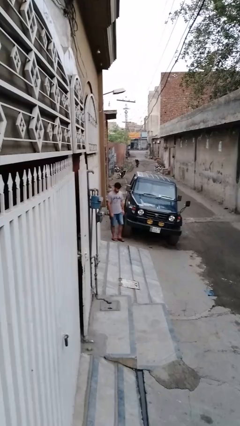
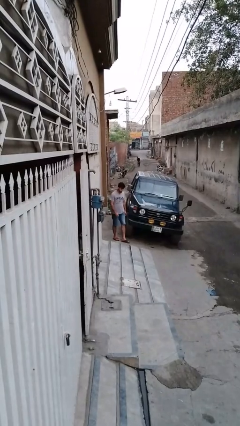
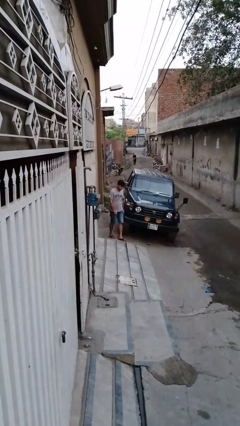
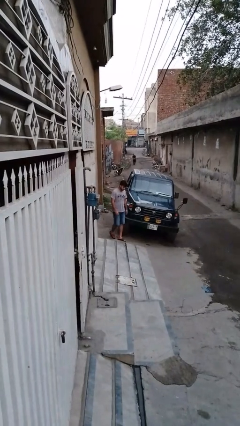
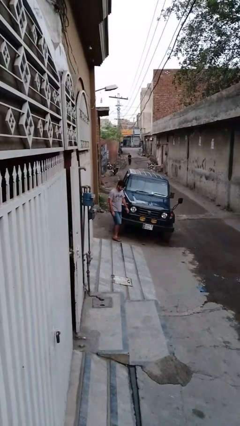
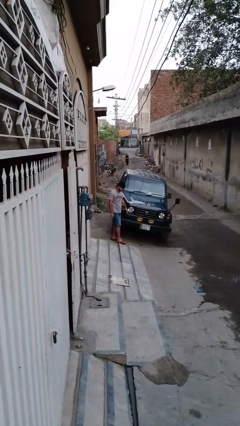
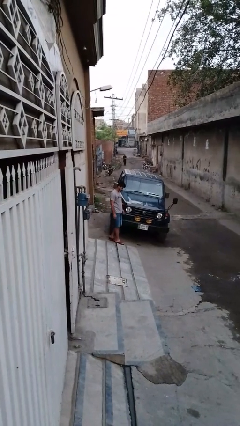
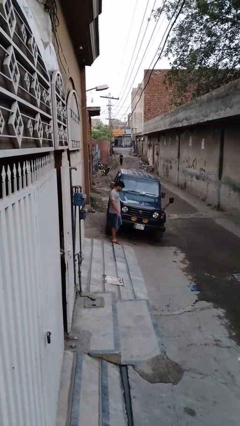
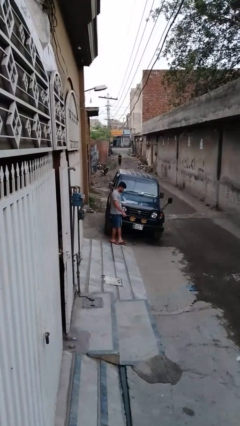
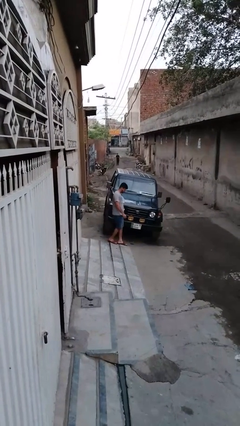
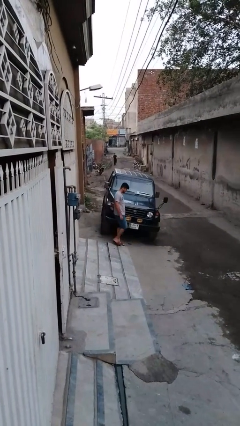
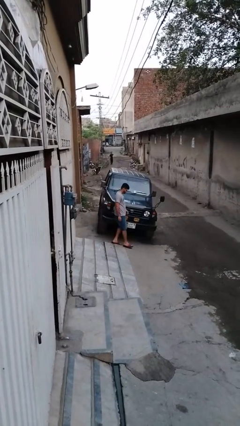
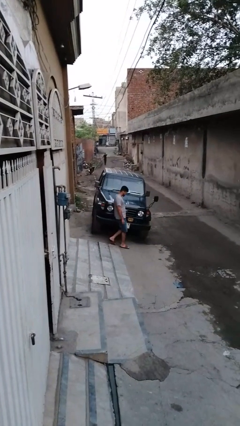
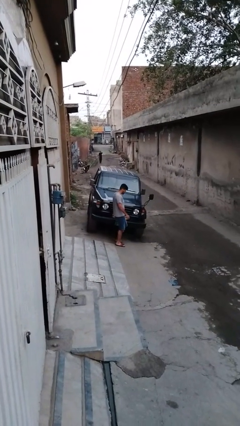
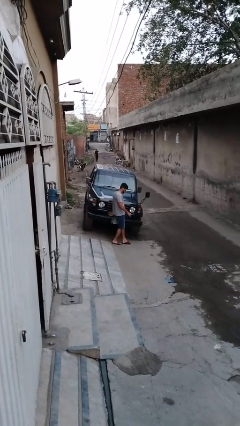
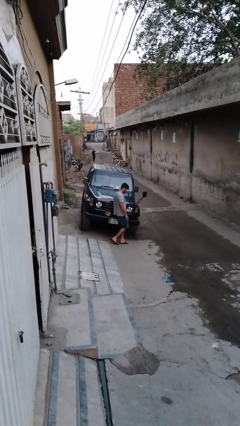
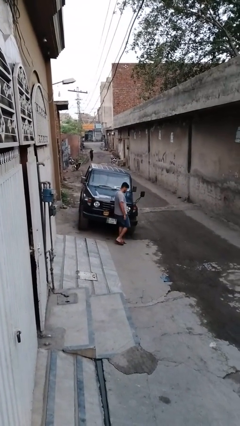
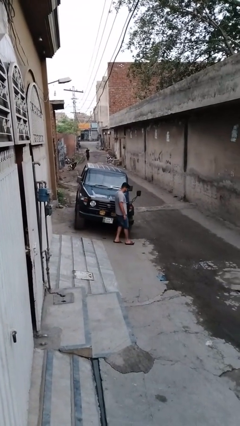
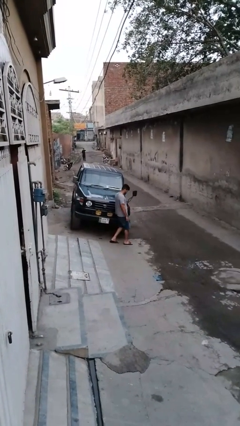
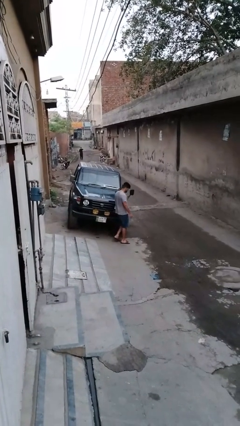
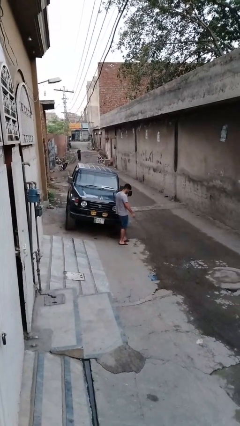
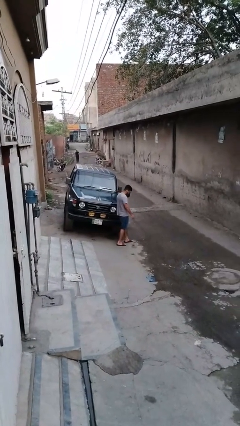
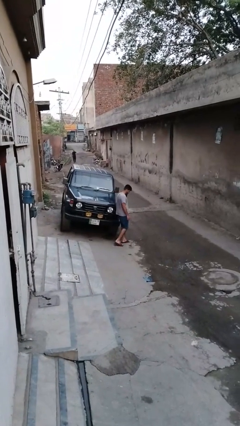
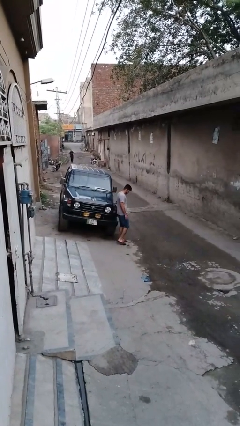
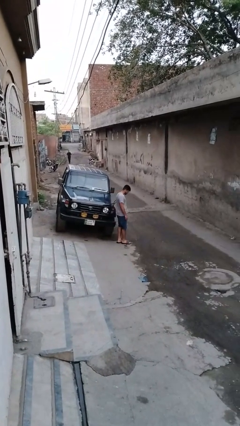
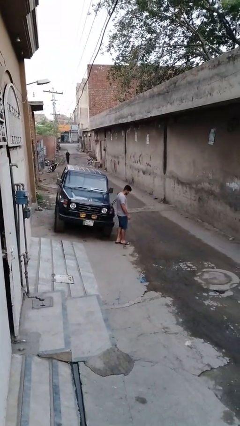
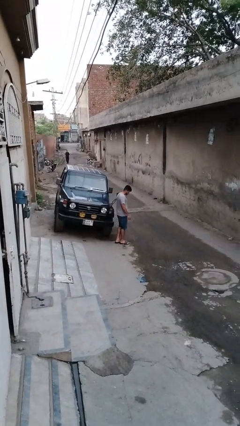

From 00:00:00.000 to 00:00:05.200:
person walks around car

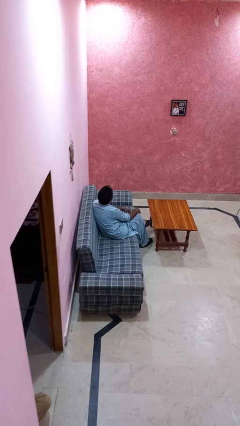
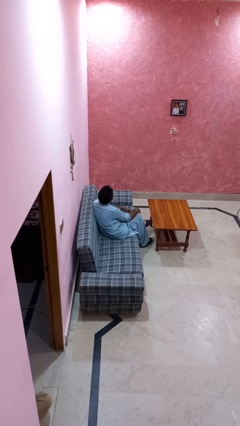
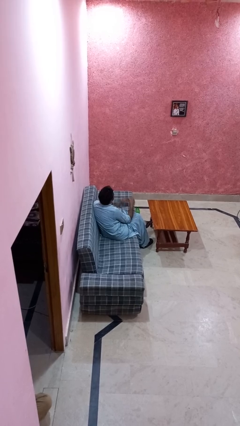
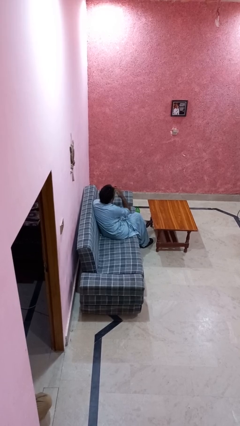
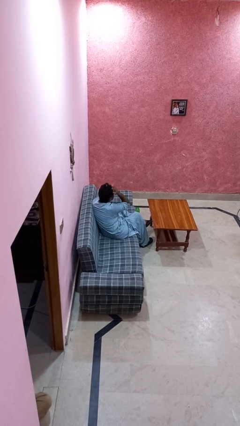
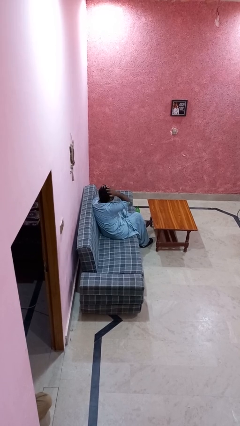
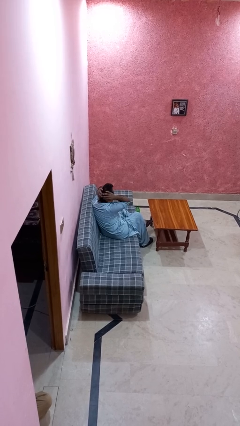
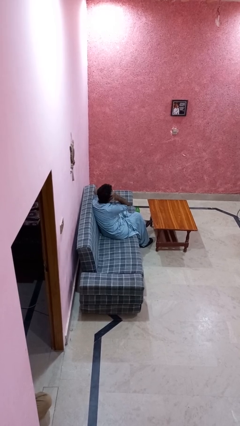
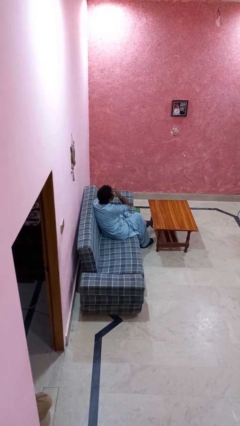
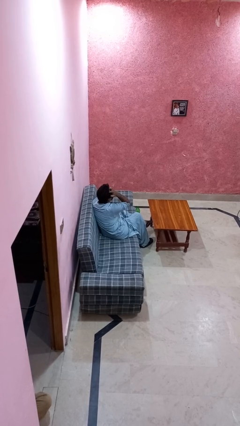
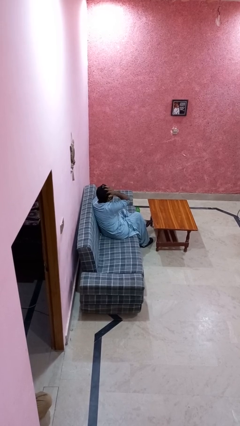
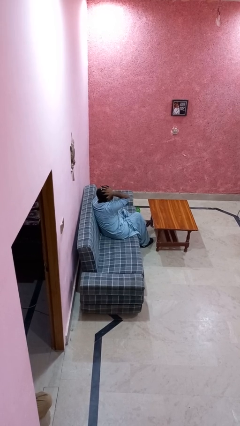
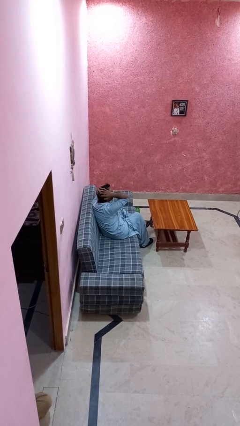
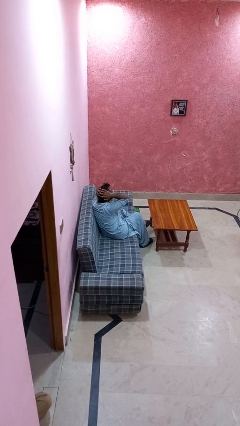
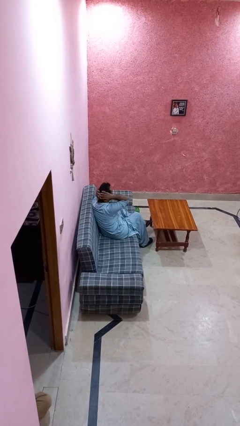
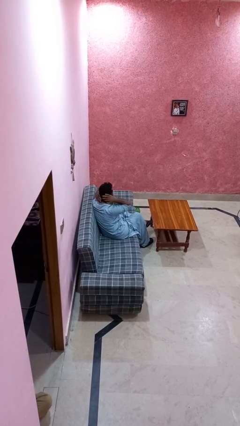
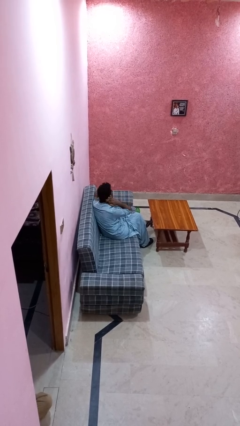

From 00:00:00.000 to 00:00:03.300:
person strokes hair

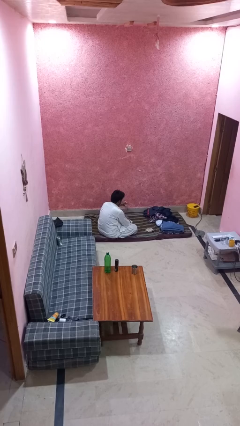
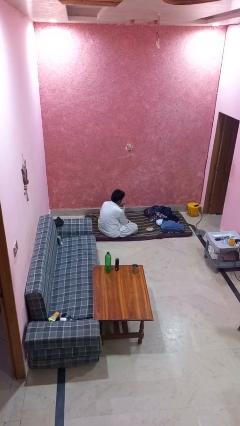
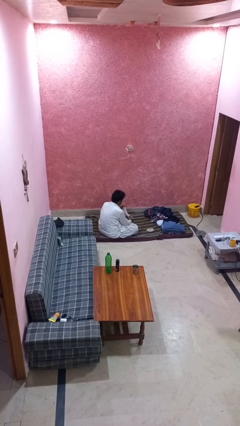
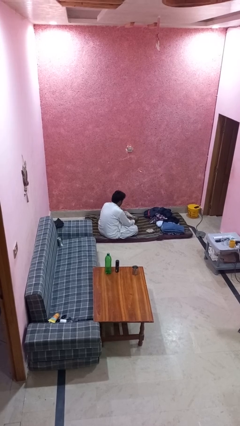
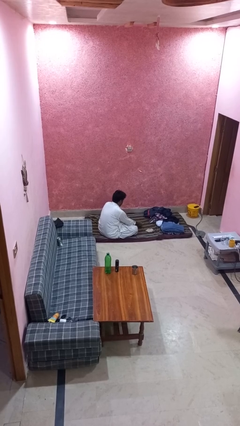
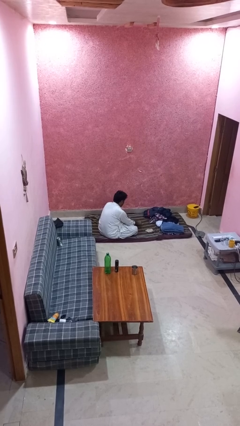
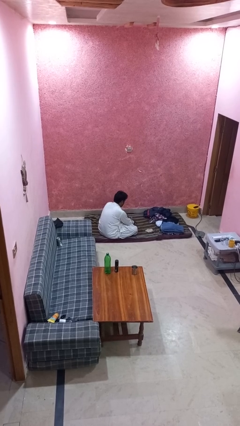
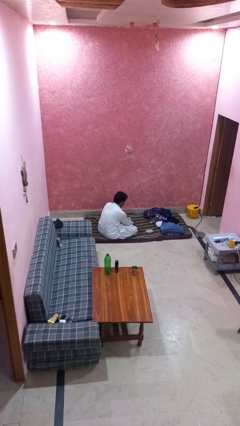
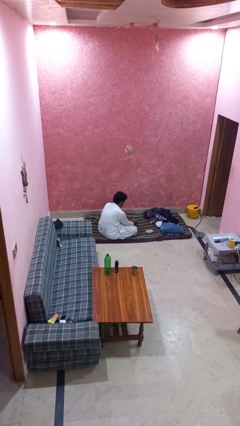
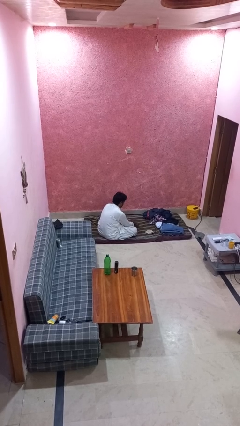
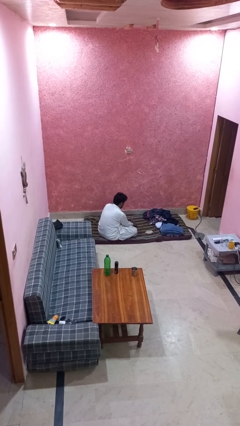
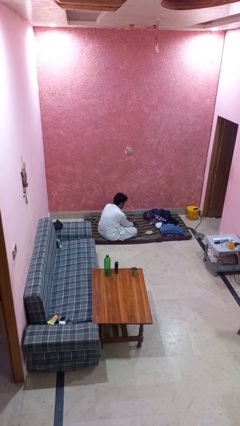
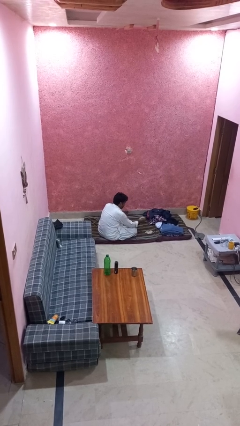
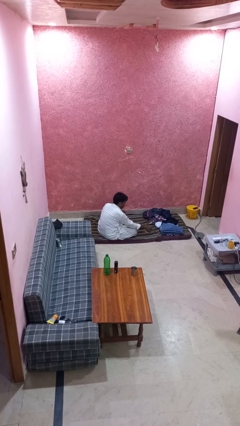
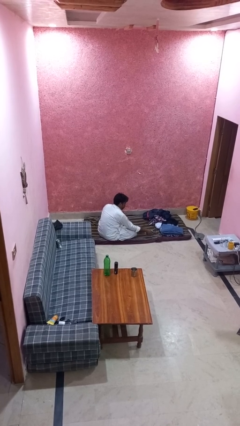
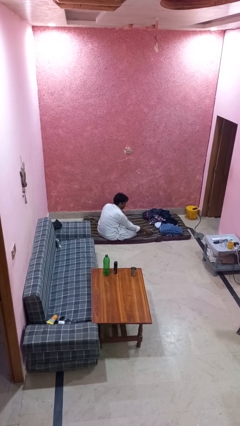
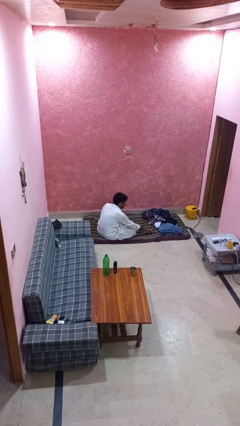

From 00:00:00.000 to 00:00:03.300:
person folds socks

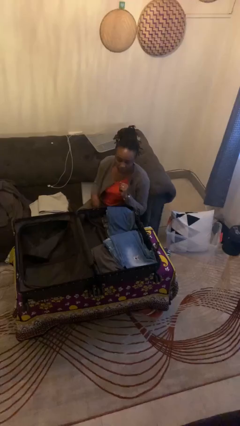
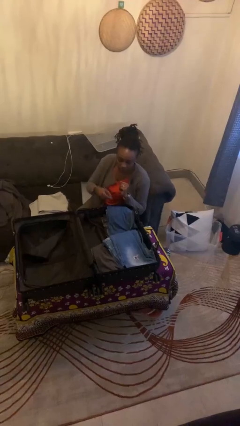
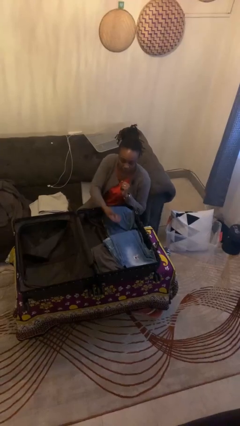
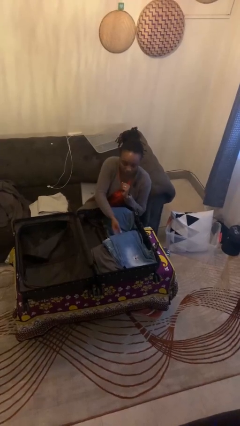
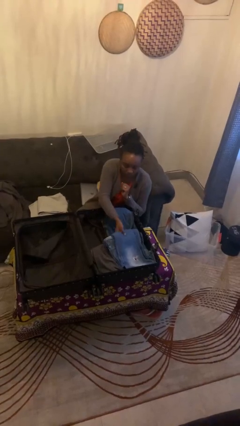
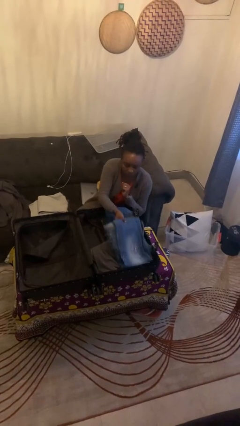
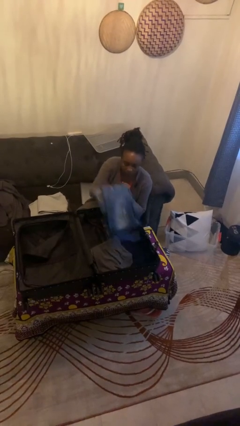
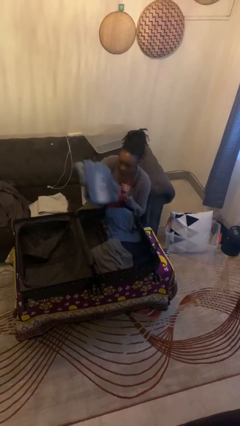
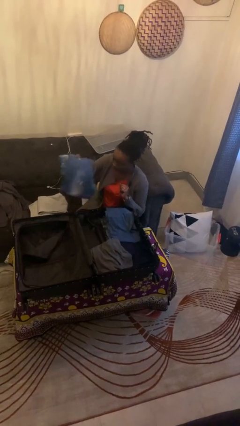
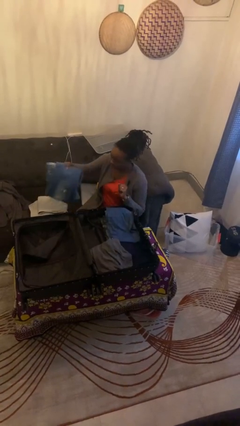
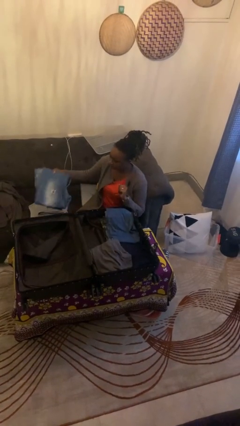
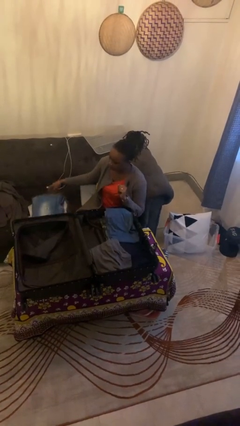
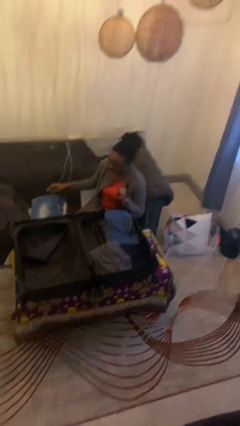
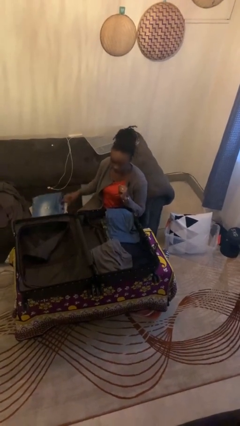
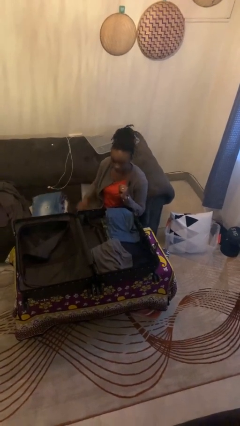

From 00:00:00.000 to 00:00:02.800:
person unloads clothes from suitcase

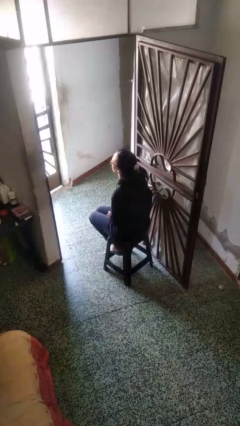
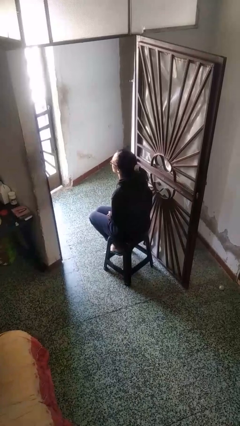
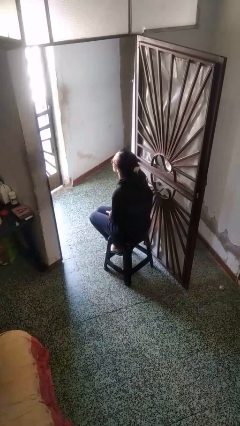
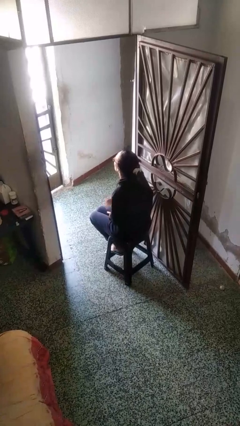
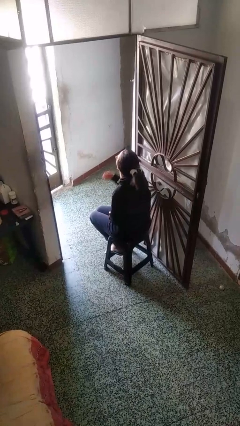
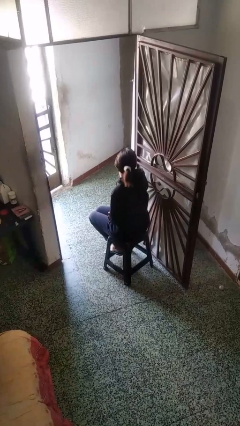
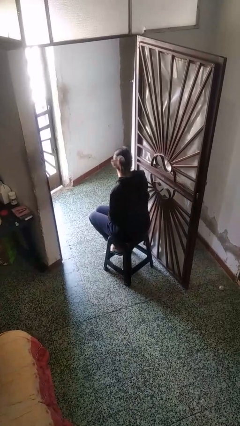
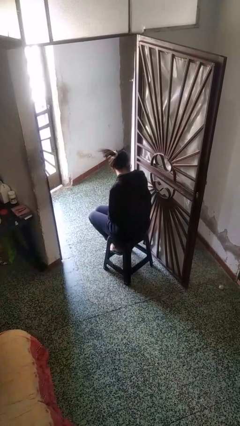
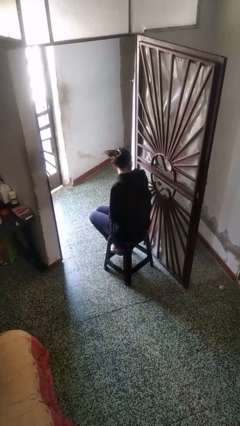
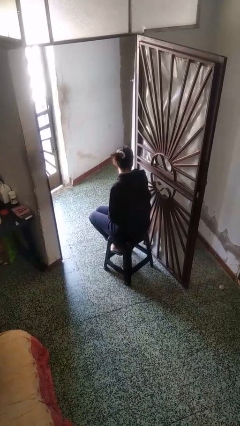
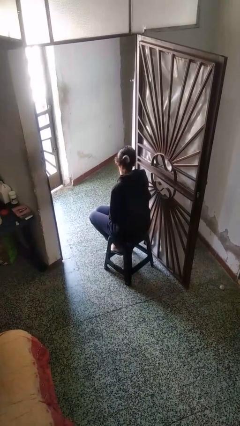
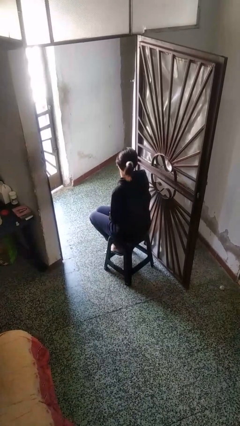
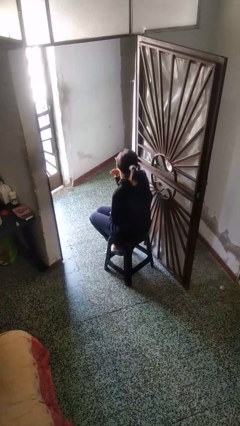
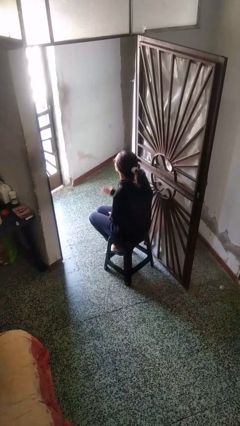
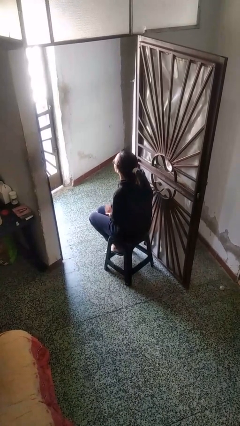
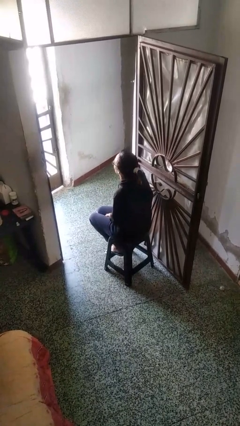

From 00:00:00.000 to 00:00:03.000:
person sneezes into hand

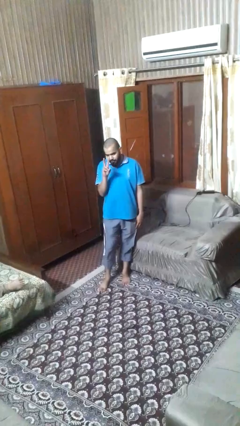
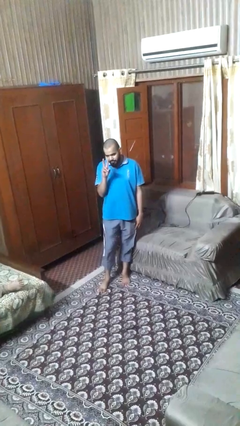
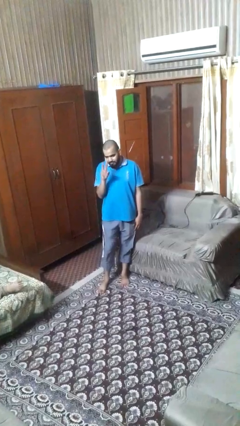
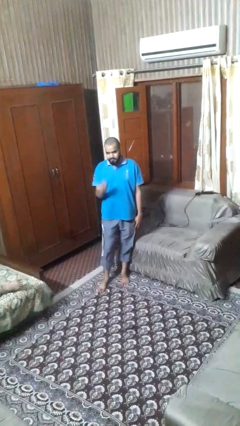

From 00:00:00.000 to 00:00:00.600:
person gestures peace
